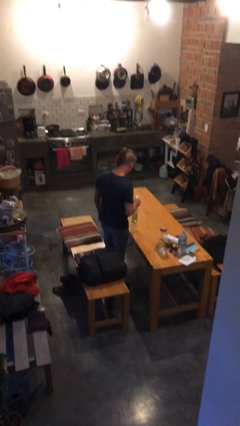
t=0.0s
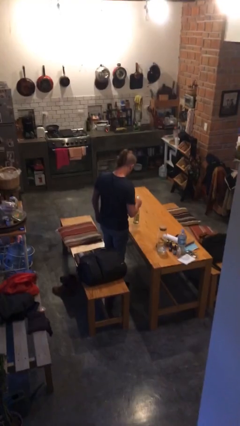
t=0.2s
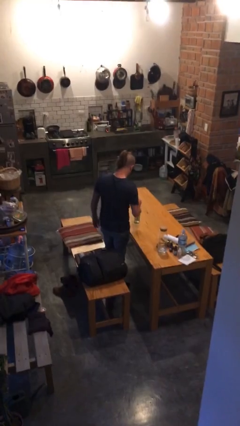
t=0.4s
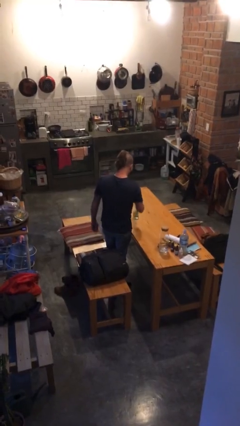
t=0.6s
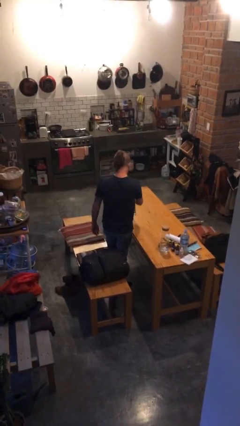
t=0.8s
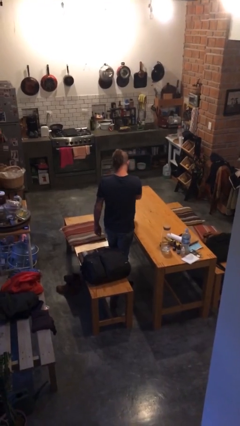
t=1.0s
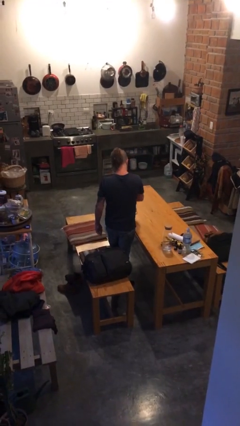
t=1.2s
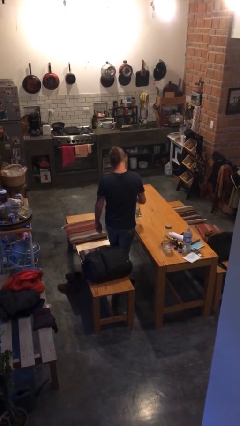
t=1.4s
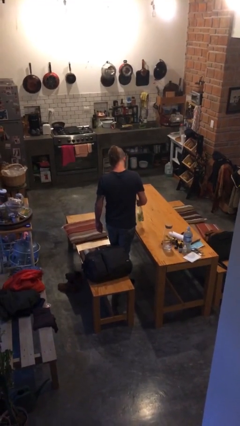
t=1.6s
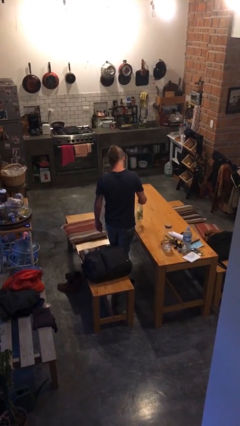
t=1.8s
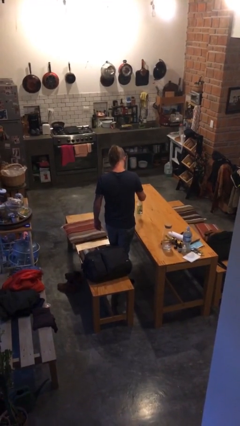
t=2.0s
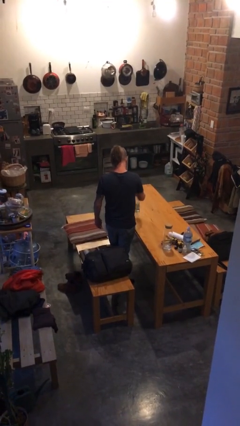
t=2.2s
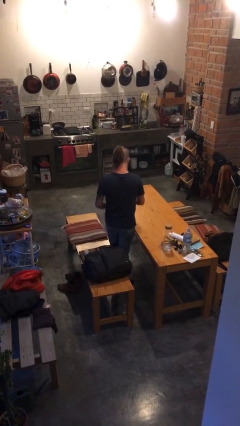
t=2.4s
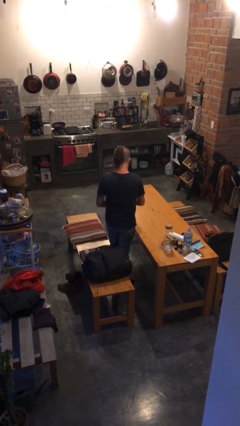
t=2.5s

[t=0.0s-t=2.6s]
person sprays from bottle

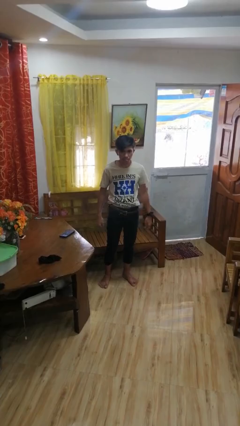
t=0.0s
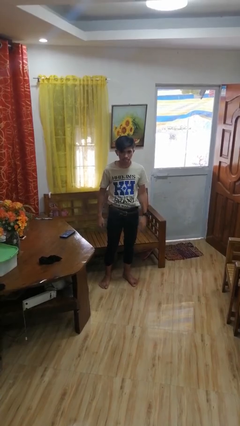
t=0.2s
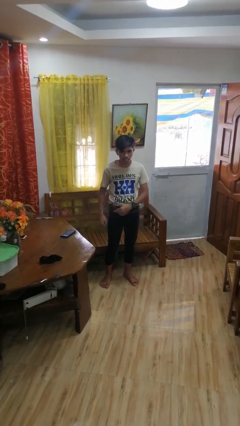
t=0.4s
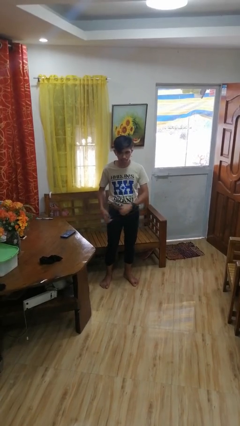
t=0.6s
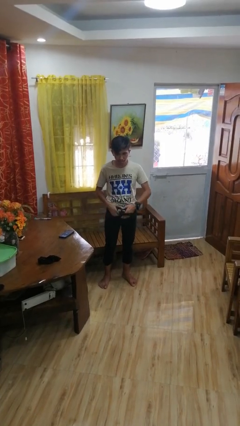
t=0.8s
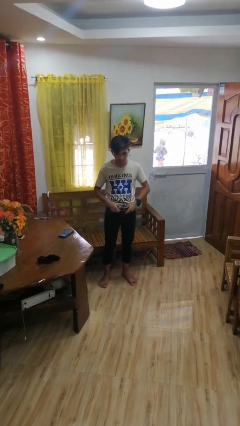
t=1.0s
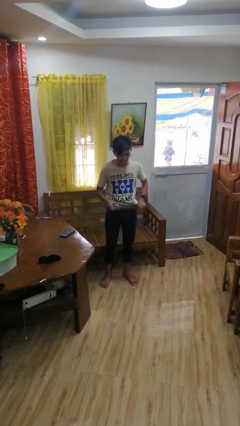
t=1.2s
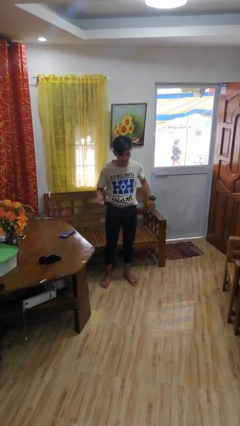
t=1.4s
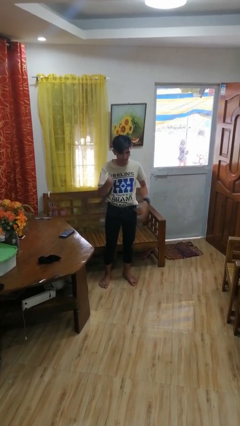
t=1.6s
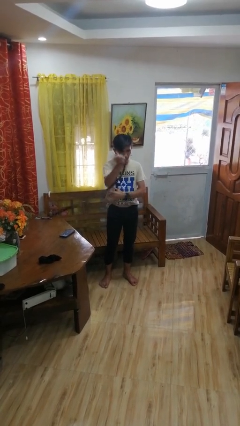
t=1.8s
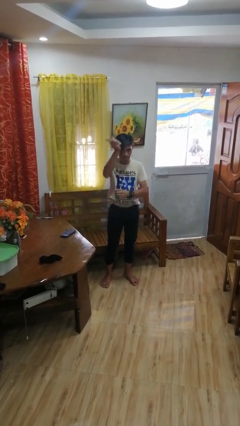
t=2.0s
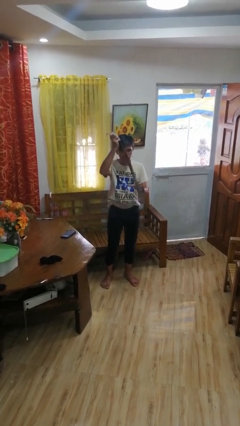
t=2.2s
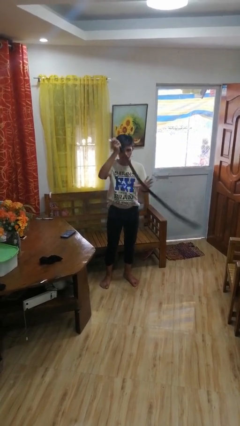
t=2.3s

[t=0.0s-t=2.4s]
person takes off belt

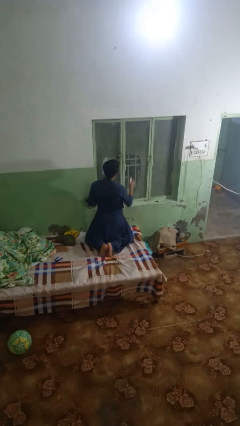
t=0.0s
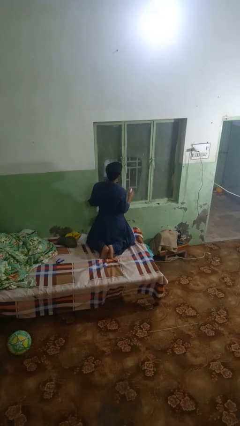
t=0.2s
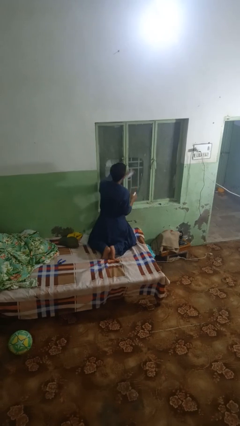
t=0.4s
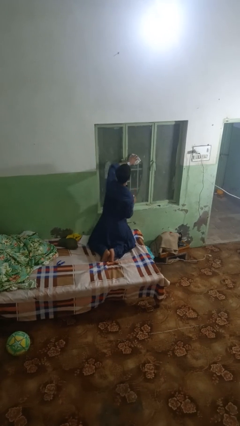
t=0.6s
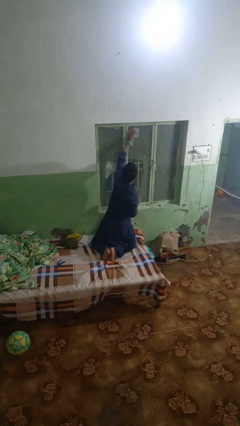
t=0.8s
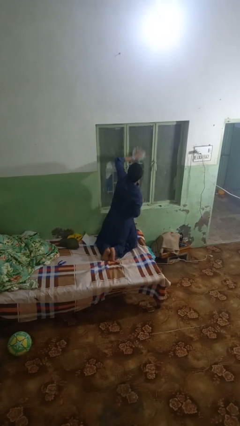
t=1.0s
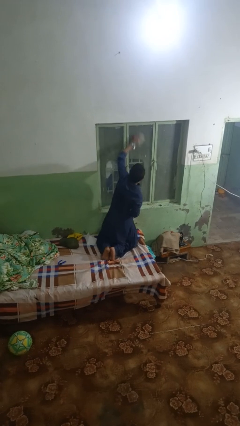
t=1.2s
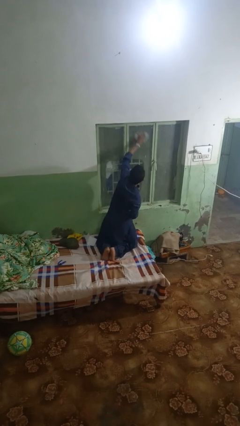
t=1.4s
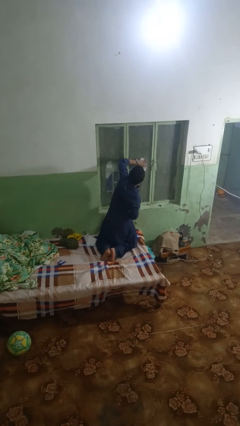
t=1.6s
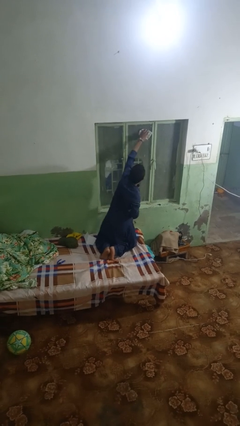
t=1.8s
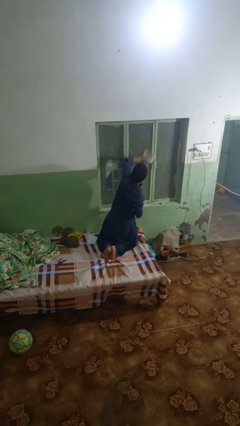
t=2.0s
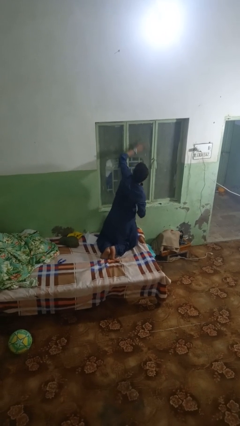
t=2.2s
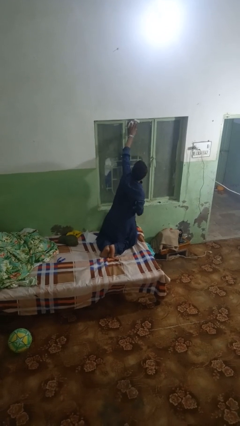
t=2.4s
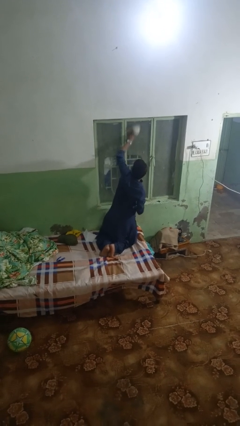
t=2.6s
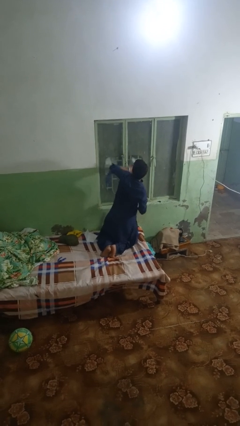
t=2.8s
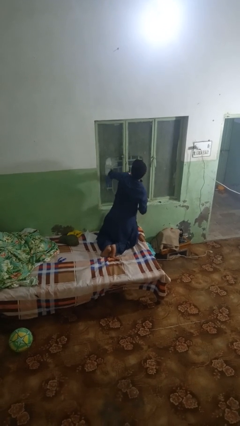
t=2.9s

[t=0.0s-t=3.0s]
person washes window

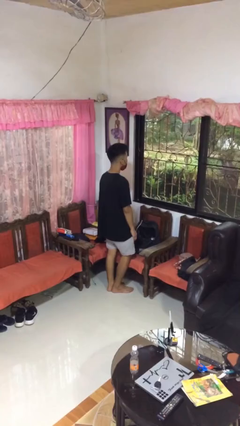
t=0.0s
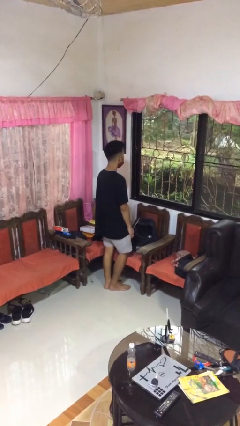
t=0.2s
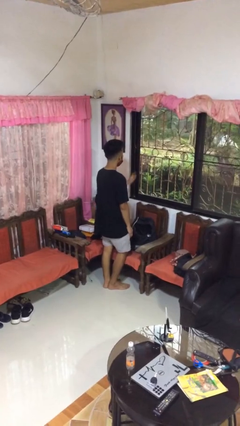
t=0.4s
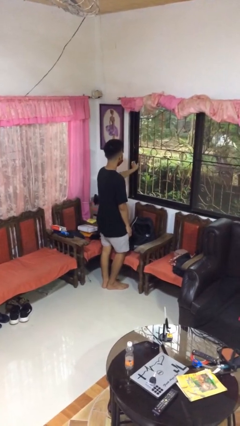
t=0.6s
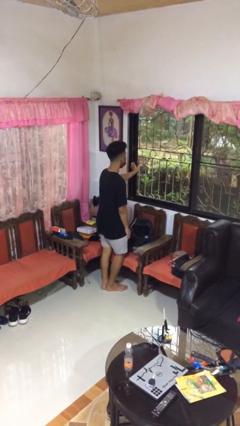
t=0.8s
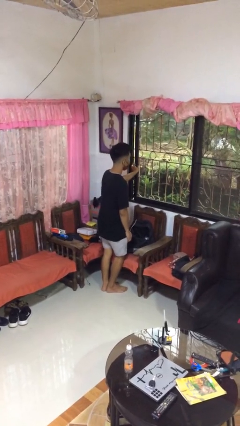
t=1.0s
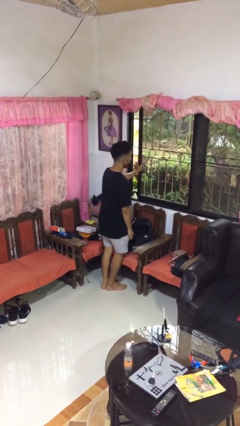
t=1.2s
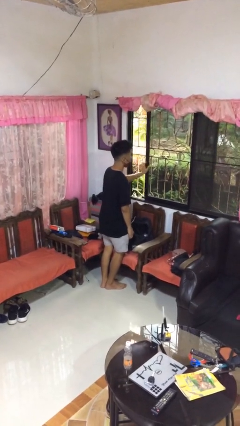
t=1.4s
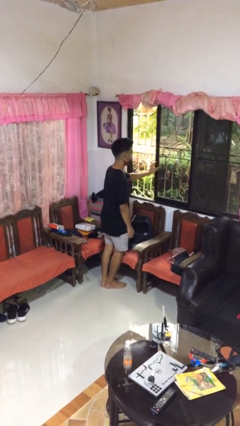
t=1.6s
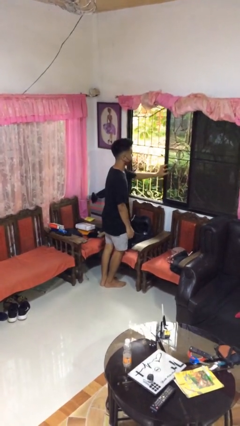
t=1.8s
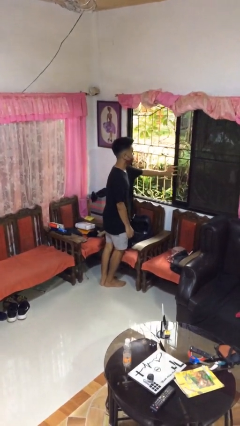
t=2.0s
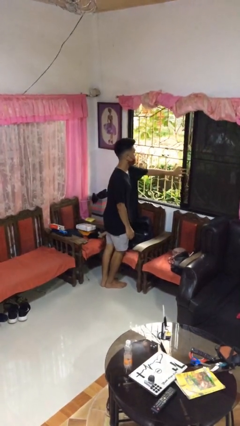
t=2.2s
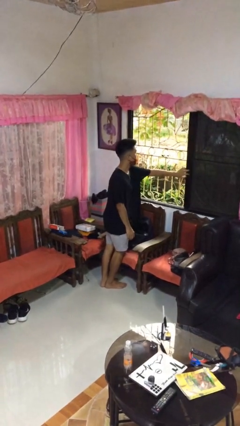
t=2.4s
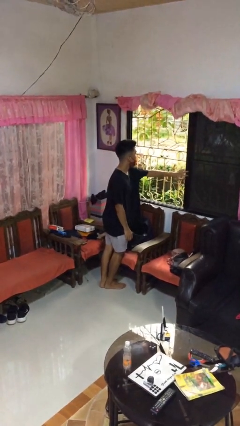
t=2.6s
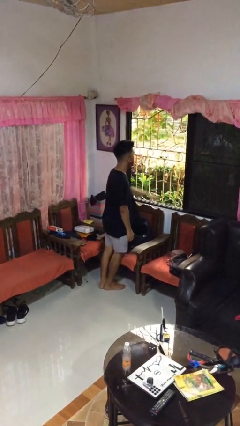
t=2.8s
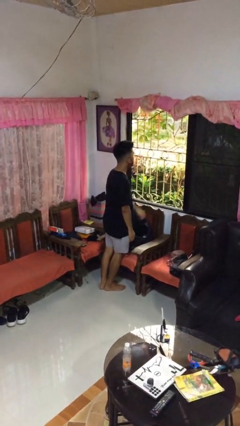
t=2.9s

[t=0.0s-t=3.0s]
person opens home window

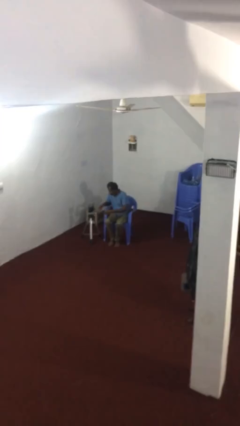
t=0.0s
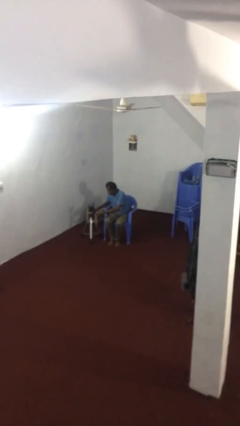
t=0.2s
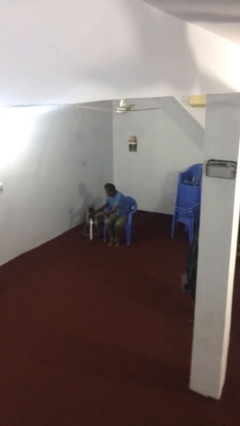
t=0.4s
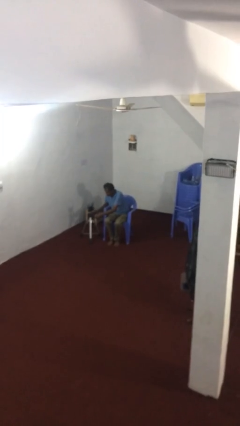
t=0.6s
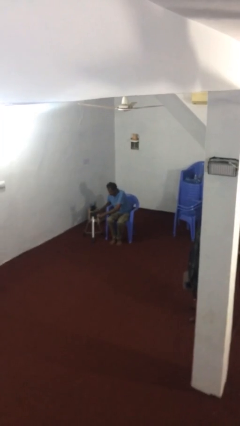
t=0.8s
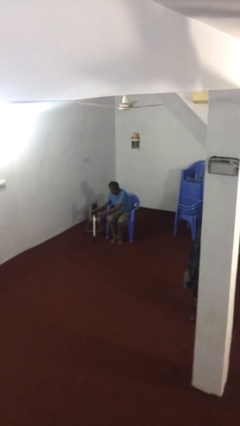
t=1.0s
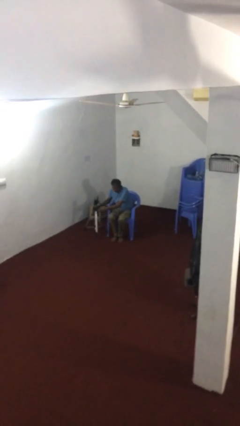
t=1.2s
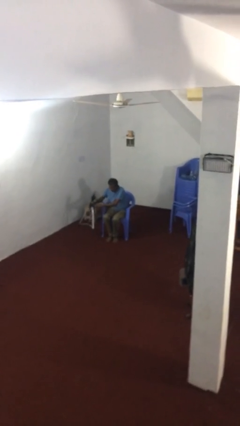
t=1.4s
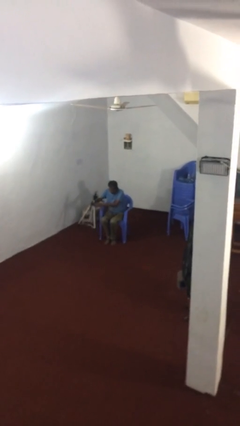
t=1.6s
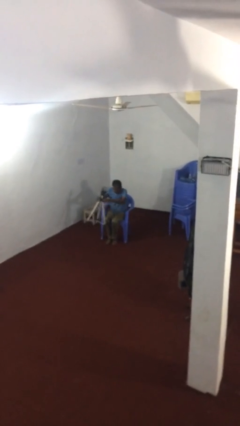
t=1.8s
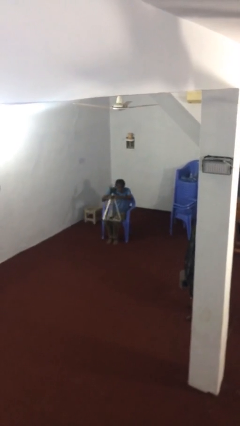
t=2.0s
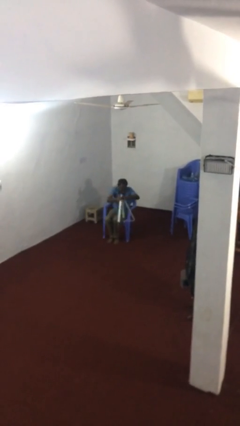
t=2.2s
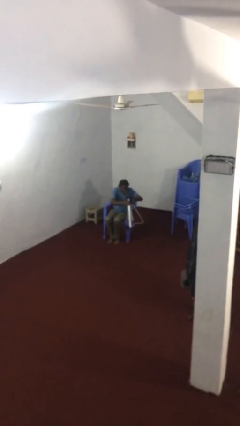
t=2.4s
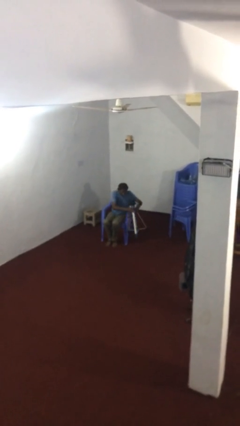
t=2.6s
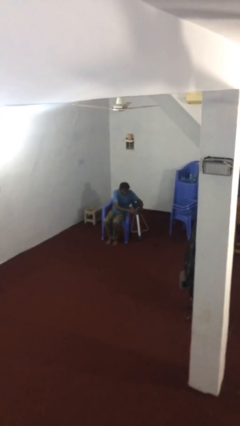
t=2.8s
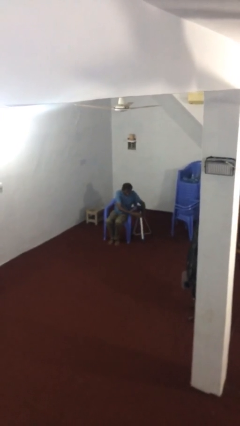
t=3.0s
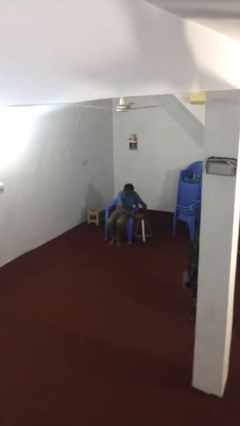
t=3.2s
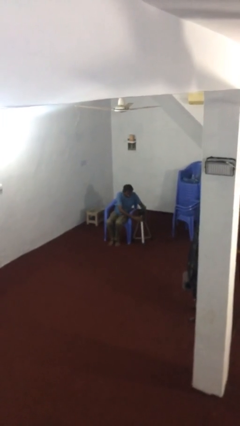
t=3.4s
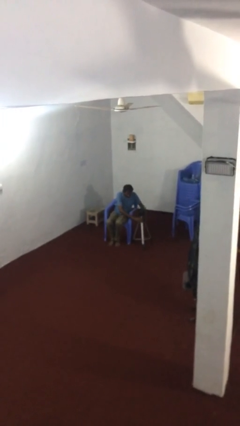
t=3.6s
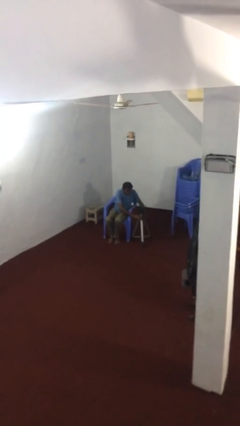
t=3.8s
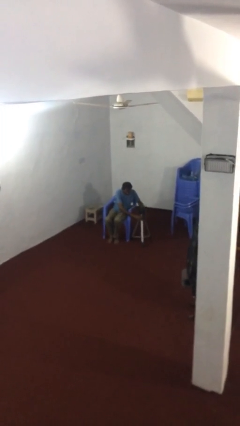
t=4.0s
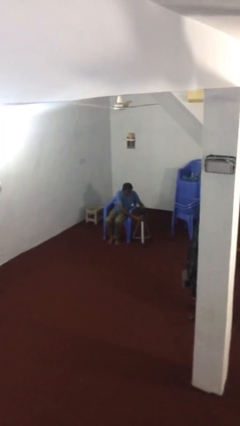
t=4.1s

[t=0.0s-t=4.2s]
person picks up object from floor

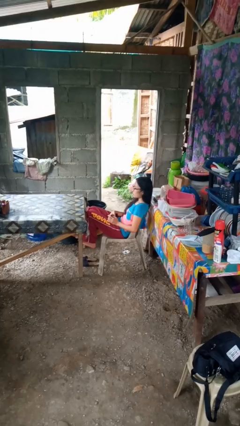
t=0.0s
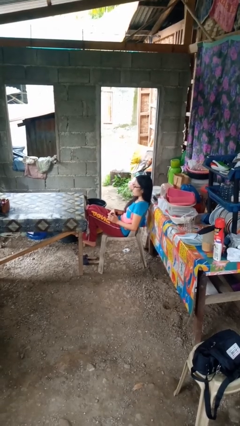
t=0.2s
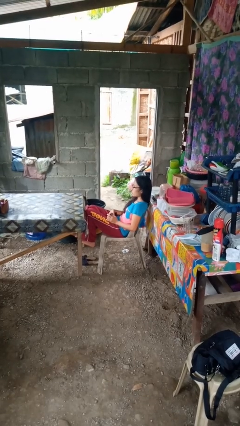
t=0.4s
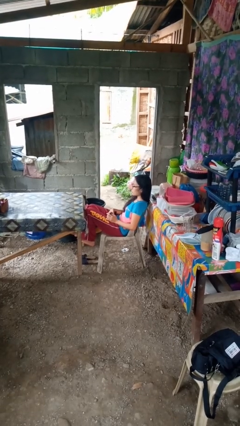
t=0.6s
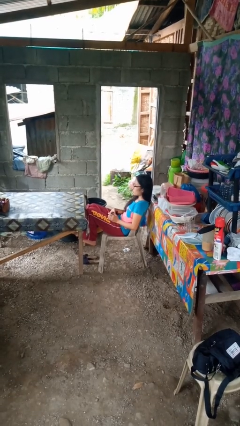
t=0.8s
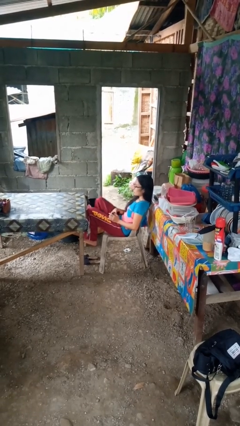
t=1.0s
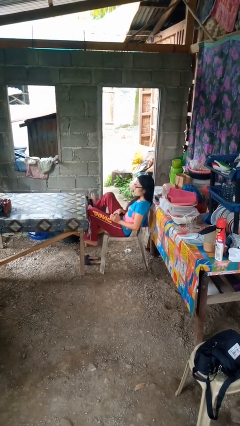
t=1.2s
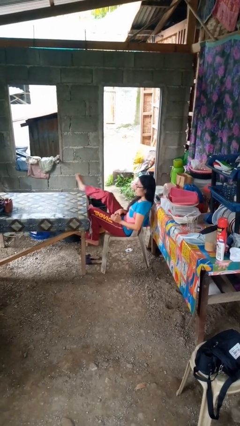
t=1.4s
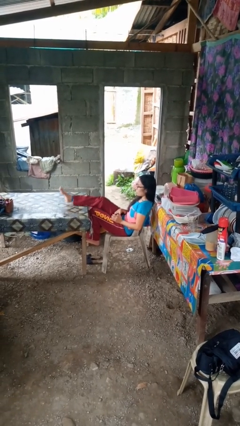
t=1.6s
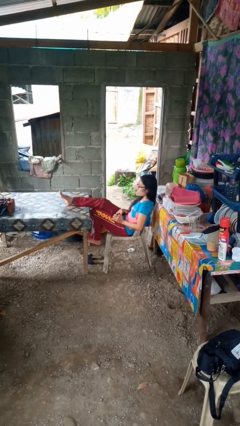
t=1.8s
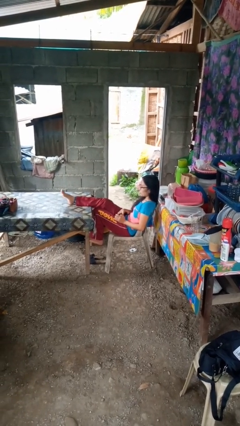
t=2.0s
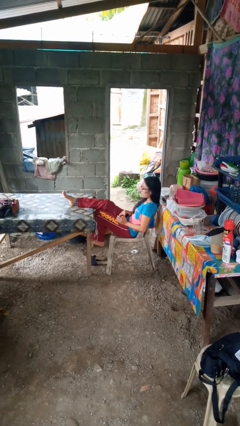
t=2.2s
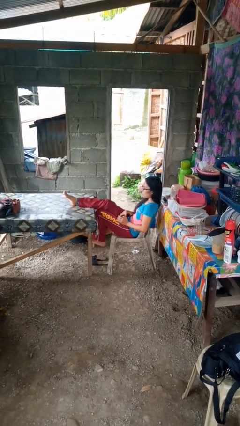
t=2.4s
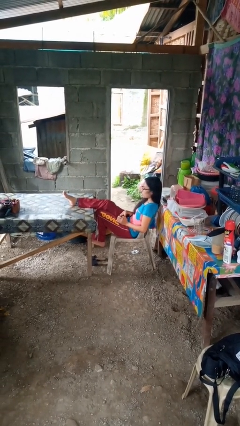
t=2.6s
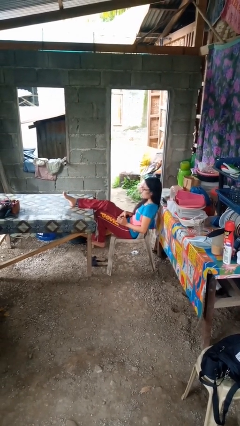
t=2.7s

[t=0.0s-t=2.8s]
person puts feet up
